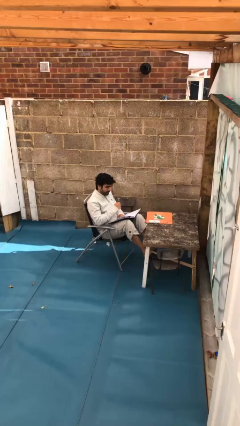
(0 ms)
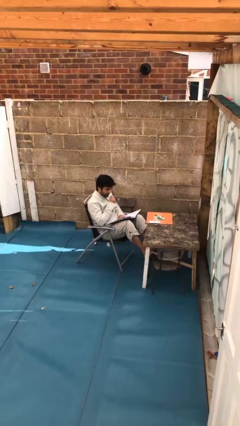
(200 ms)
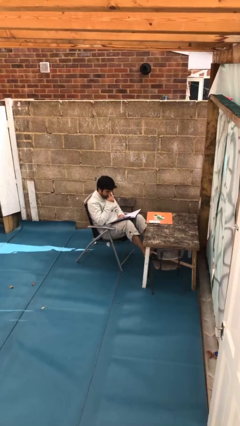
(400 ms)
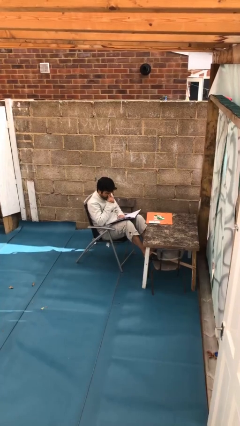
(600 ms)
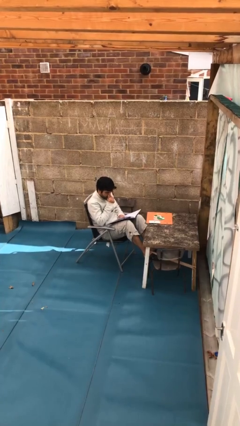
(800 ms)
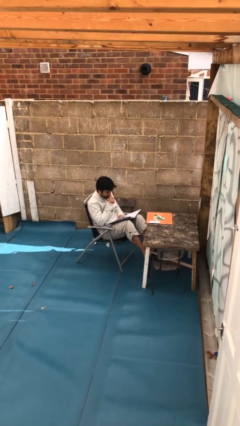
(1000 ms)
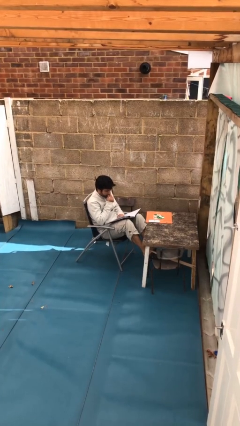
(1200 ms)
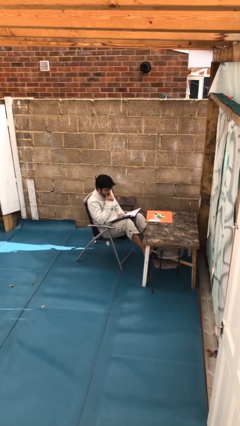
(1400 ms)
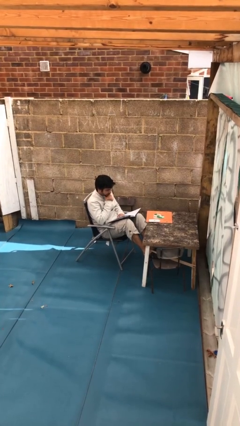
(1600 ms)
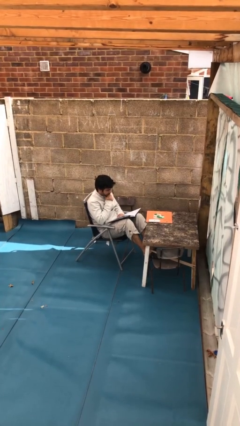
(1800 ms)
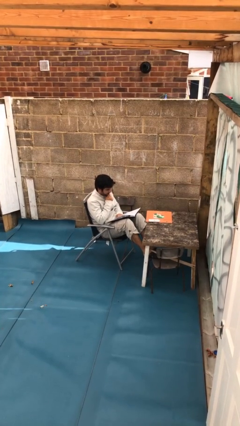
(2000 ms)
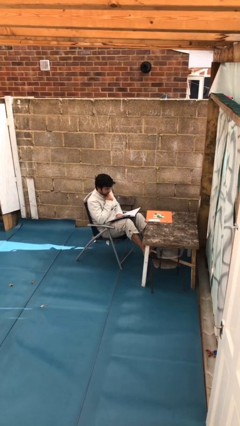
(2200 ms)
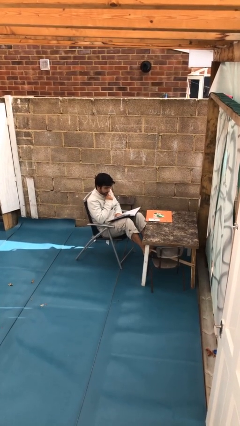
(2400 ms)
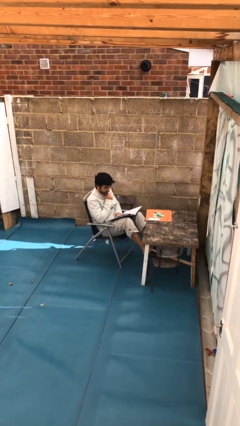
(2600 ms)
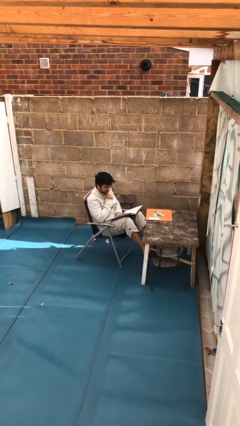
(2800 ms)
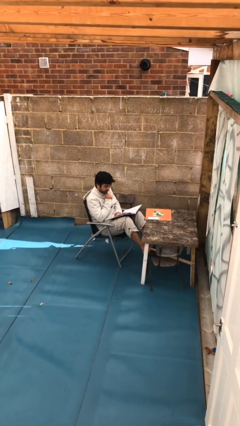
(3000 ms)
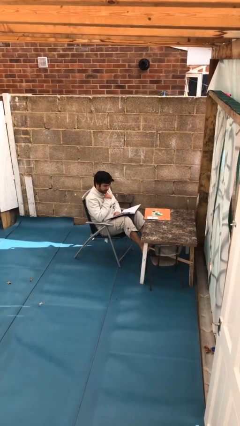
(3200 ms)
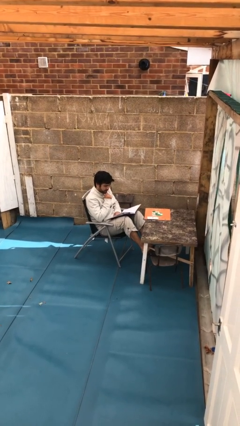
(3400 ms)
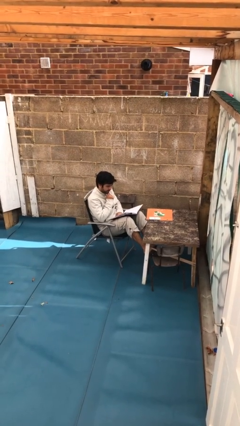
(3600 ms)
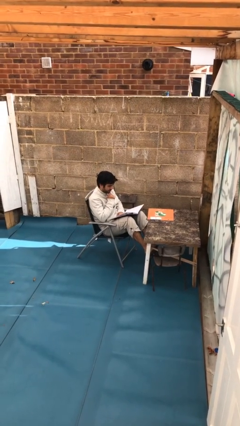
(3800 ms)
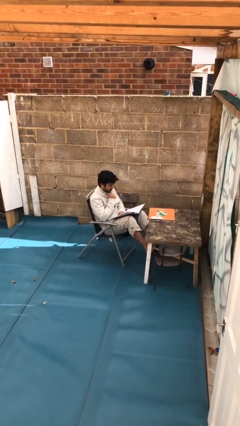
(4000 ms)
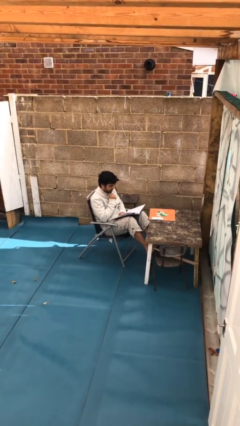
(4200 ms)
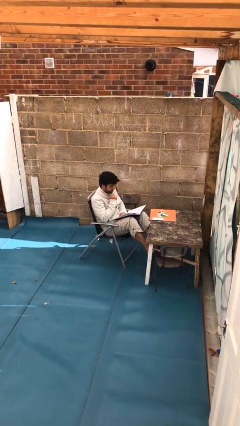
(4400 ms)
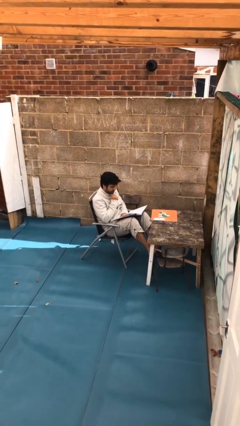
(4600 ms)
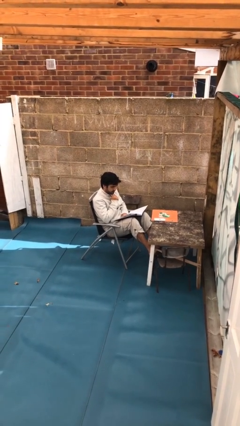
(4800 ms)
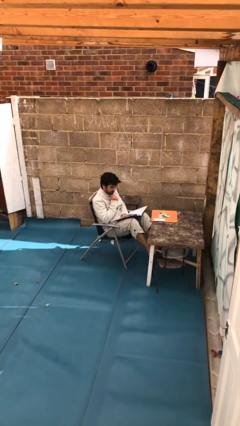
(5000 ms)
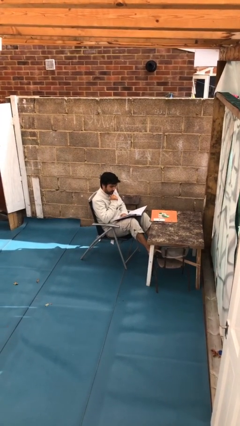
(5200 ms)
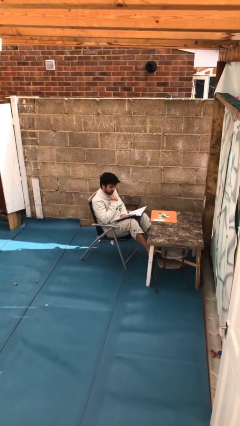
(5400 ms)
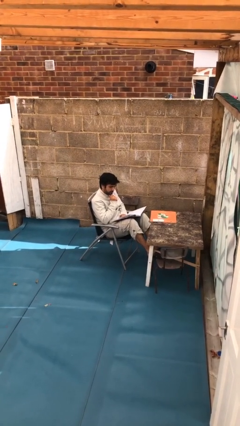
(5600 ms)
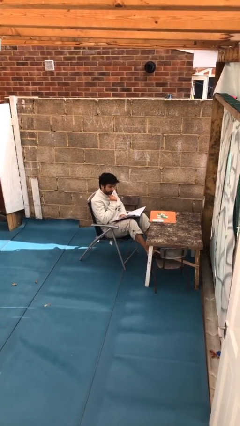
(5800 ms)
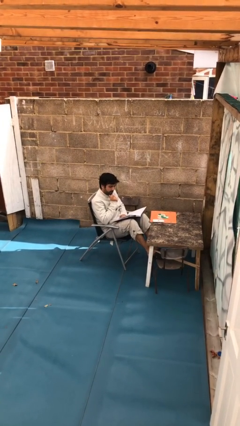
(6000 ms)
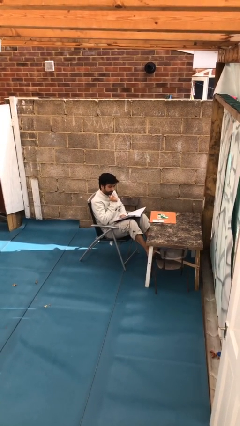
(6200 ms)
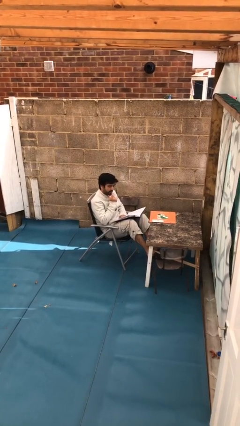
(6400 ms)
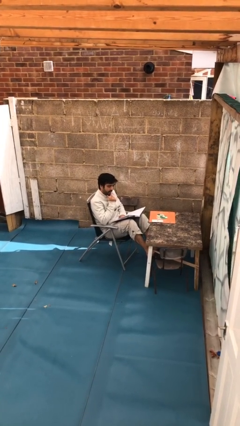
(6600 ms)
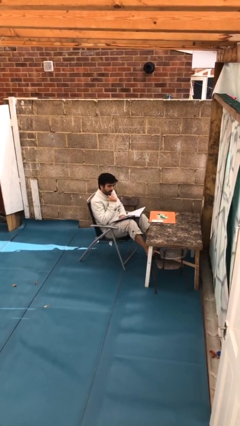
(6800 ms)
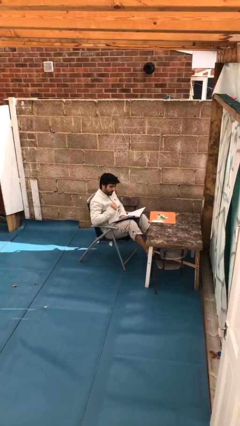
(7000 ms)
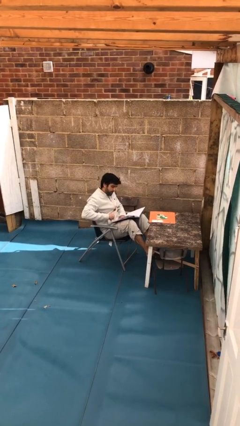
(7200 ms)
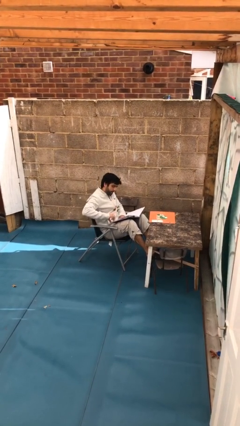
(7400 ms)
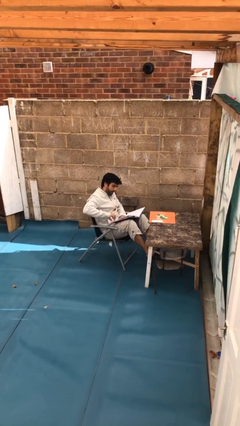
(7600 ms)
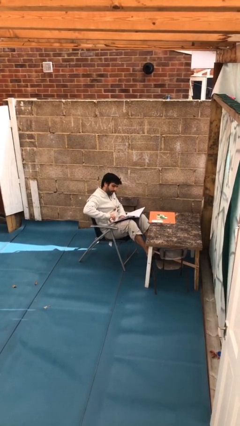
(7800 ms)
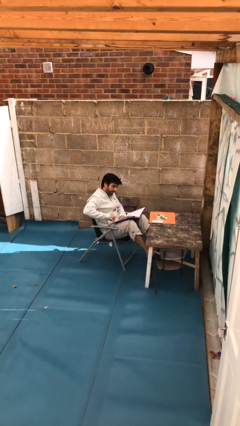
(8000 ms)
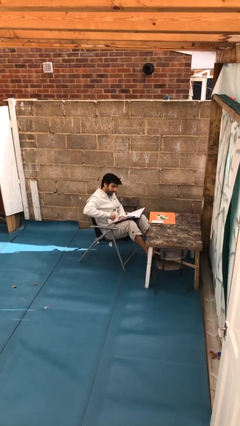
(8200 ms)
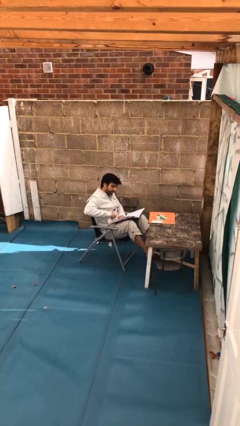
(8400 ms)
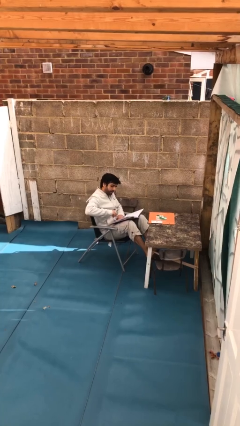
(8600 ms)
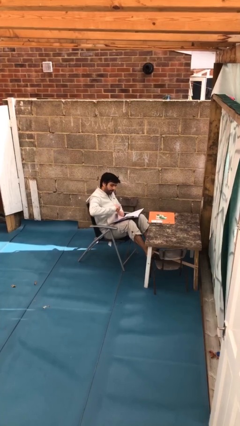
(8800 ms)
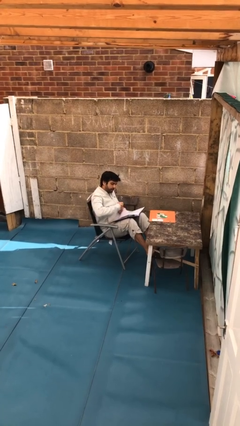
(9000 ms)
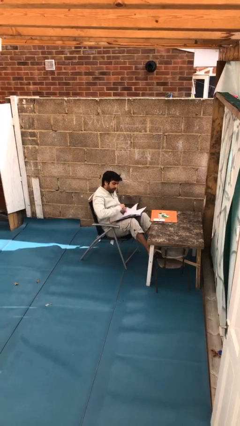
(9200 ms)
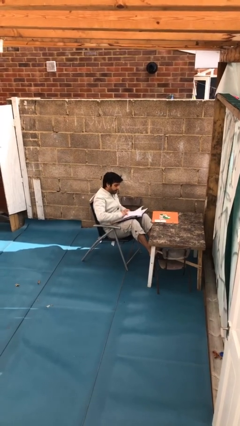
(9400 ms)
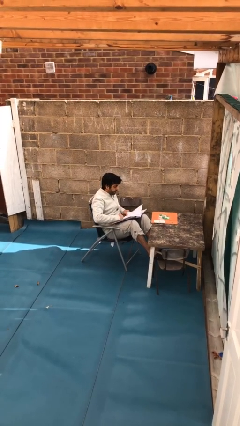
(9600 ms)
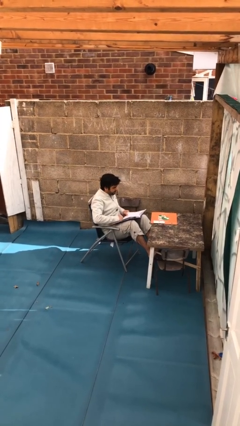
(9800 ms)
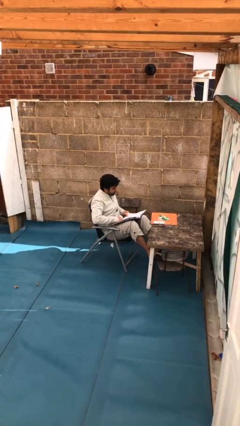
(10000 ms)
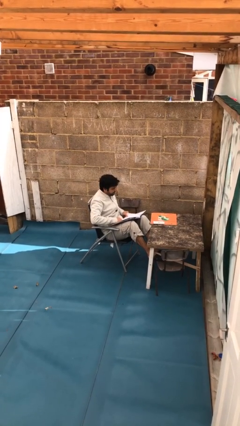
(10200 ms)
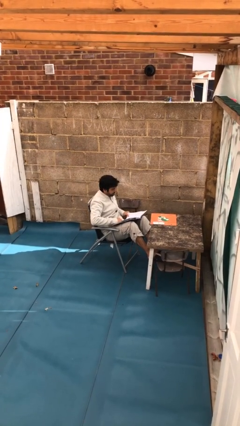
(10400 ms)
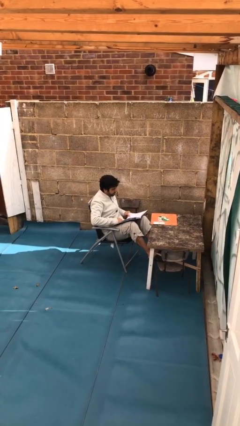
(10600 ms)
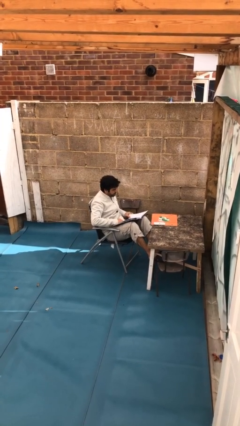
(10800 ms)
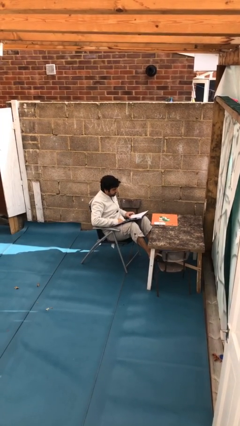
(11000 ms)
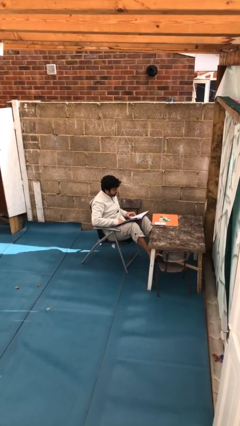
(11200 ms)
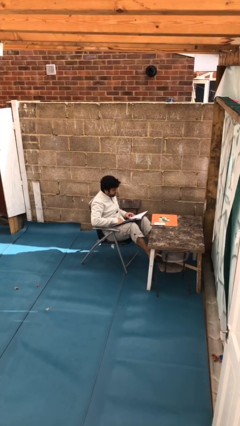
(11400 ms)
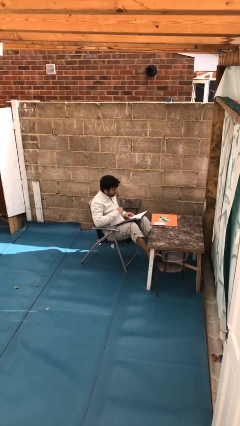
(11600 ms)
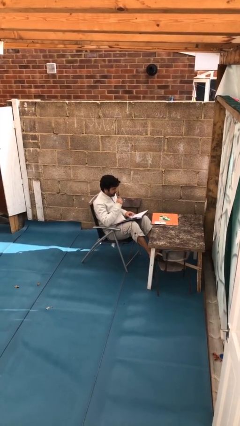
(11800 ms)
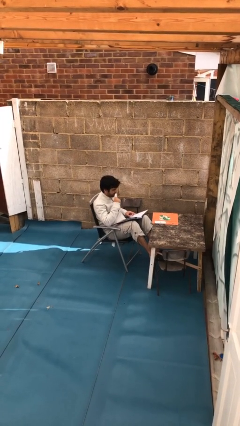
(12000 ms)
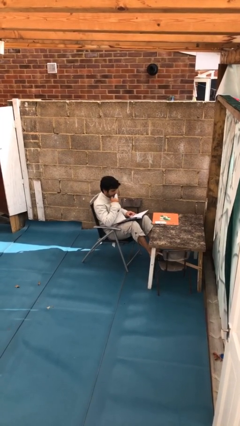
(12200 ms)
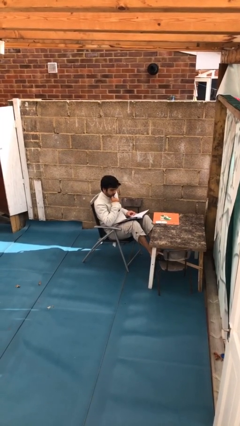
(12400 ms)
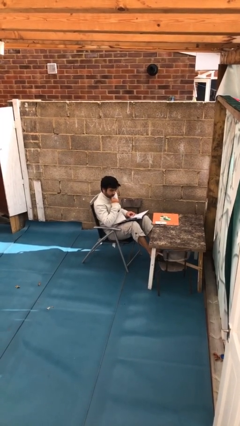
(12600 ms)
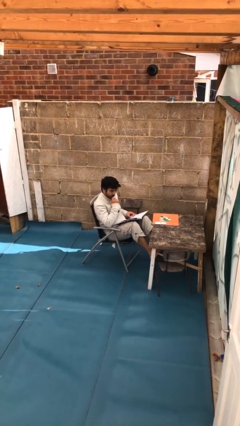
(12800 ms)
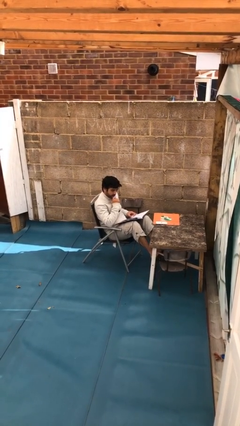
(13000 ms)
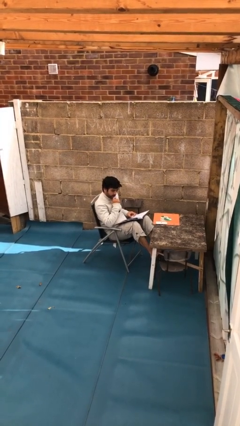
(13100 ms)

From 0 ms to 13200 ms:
person reads document

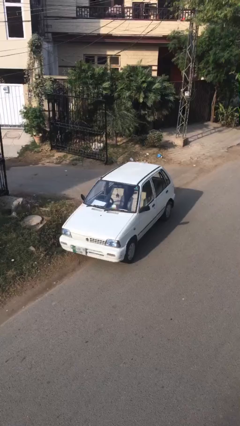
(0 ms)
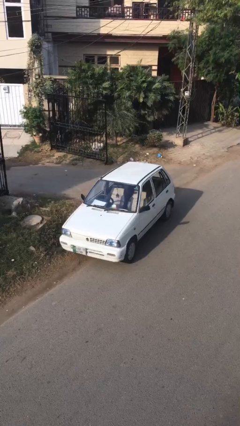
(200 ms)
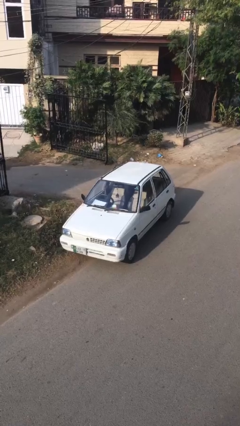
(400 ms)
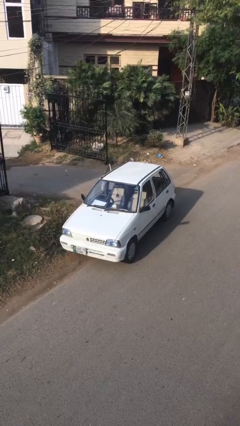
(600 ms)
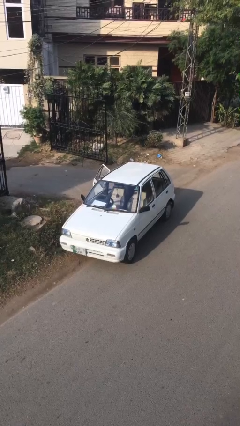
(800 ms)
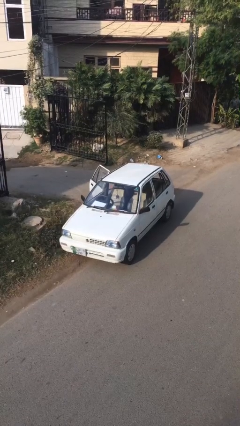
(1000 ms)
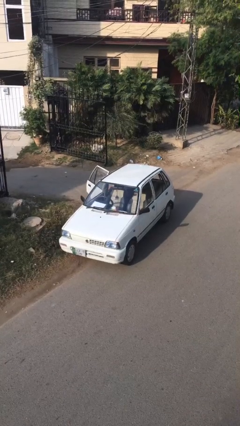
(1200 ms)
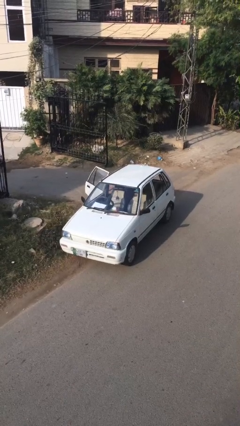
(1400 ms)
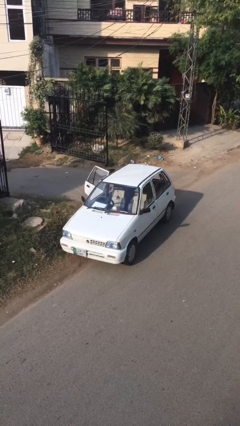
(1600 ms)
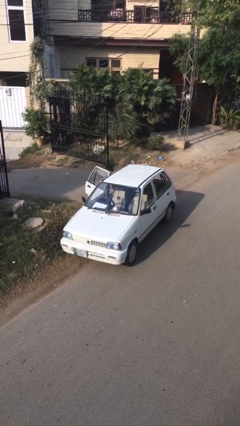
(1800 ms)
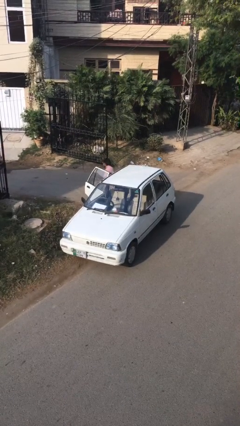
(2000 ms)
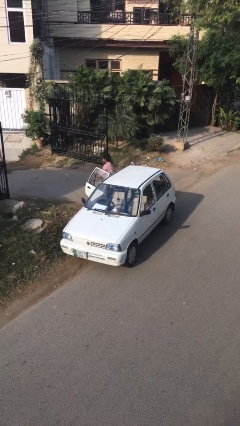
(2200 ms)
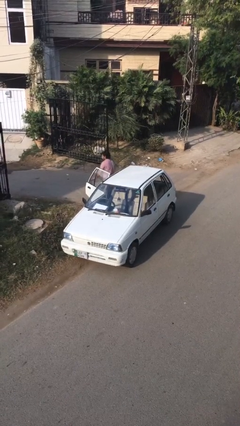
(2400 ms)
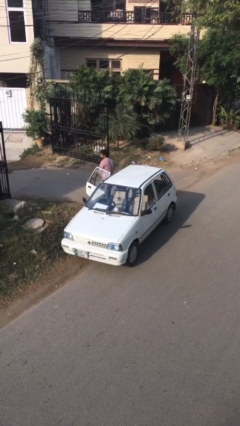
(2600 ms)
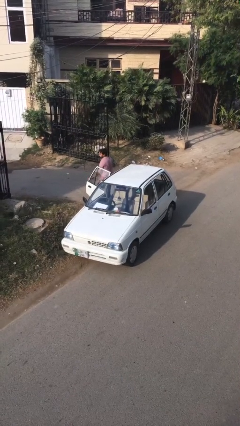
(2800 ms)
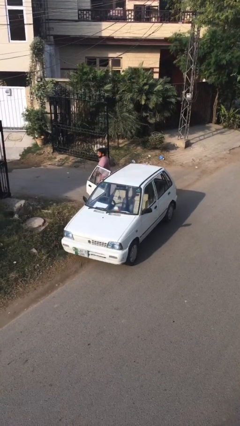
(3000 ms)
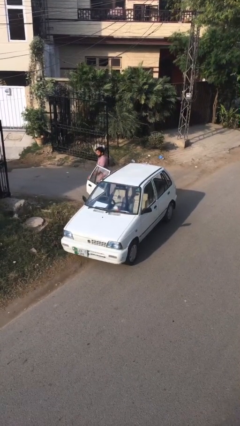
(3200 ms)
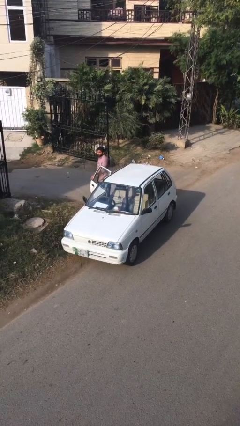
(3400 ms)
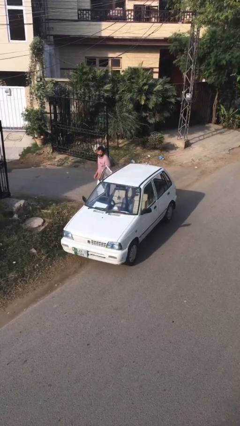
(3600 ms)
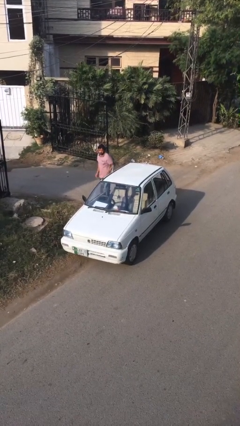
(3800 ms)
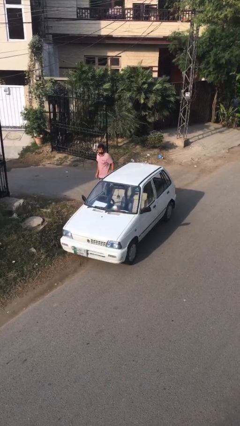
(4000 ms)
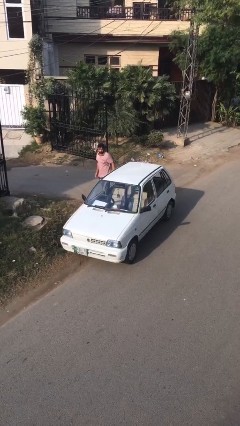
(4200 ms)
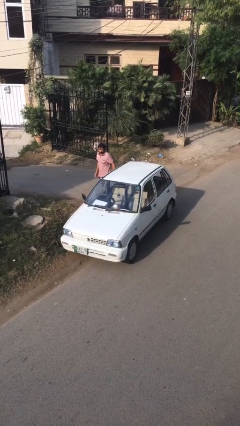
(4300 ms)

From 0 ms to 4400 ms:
car drops off person

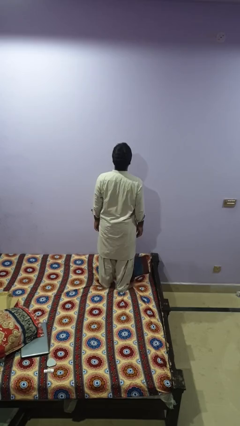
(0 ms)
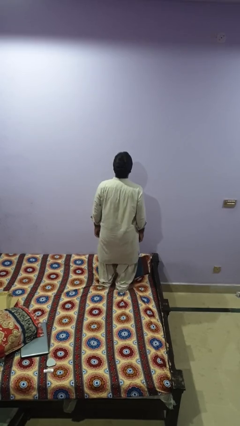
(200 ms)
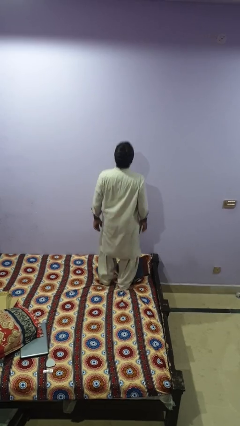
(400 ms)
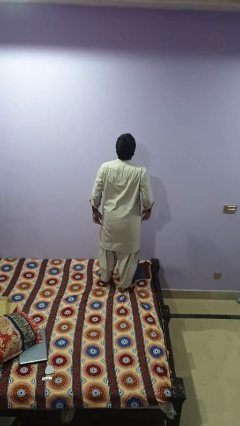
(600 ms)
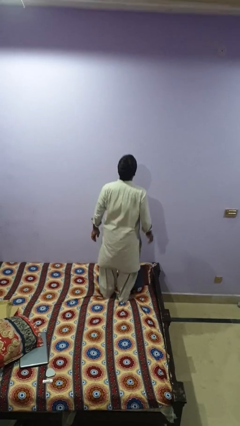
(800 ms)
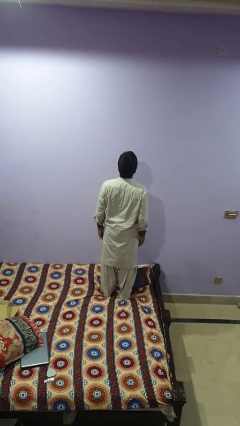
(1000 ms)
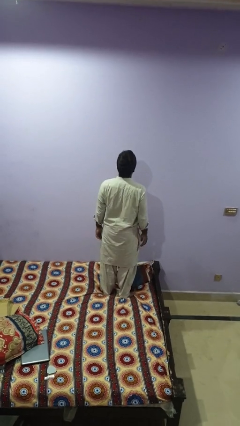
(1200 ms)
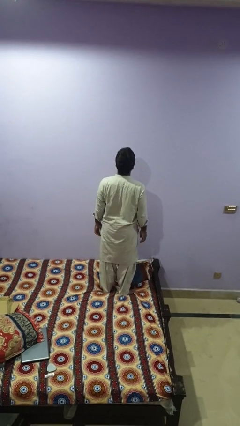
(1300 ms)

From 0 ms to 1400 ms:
person jumps on bed
